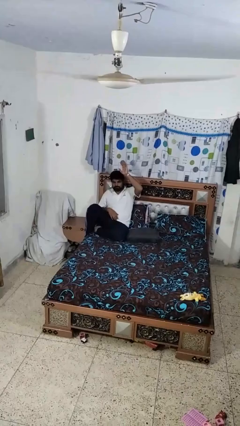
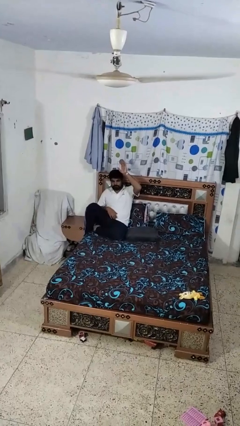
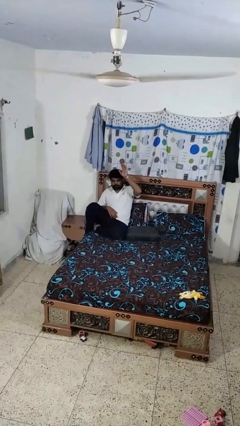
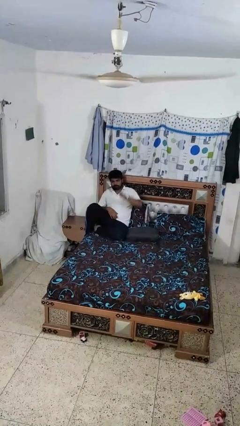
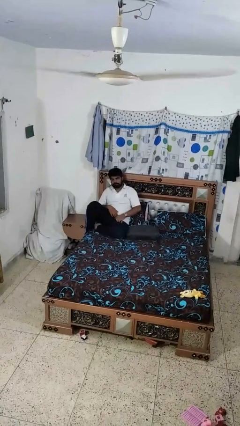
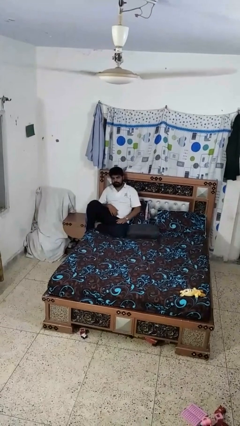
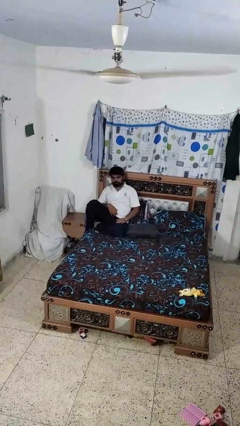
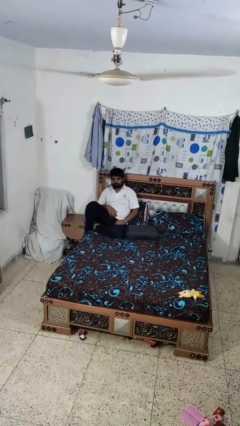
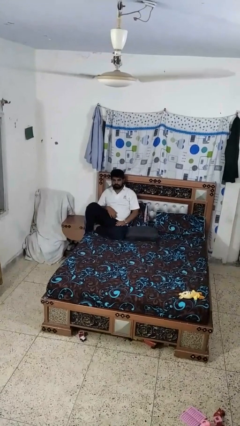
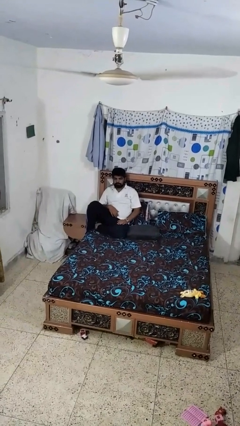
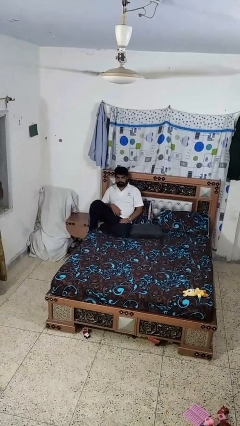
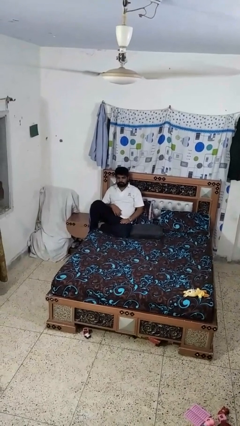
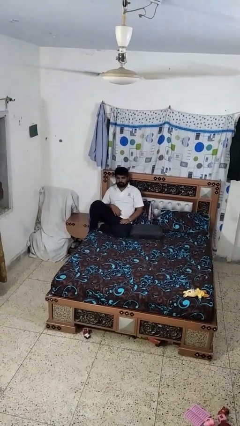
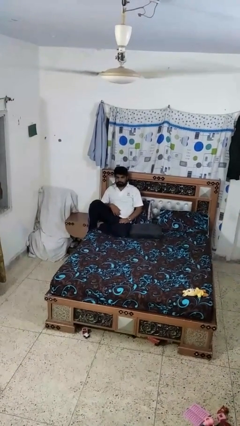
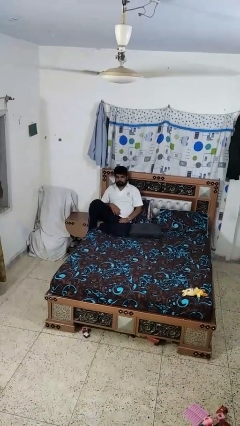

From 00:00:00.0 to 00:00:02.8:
person gestures lower hand

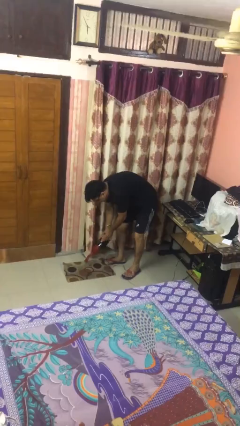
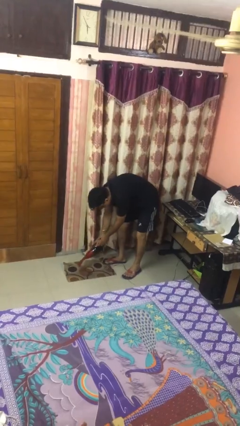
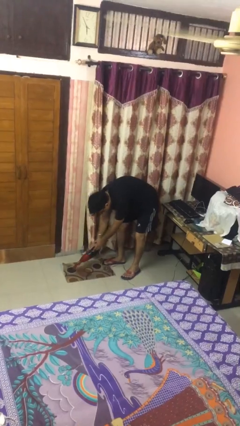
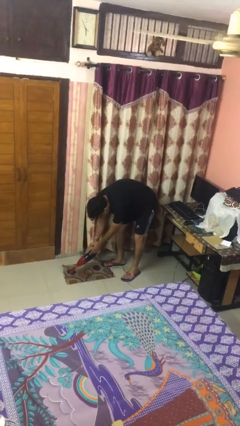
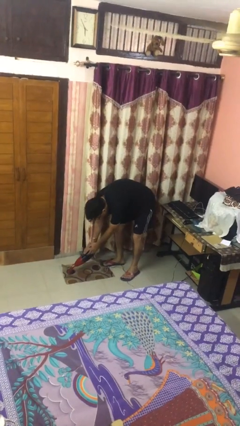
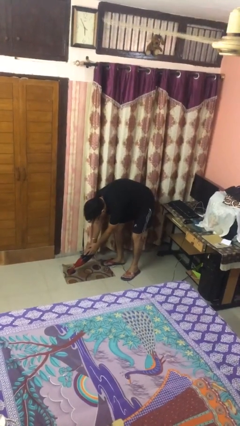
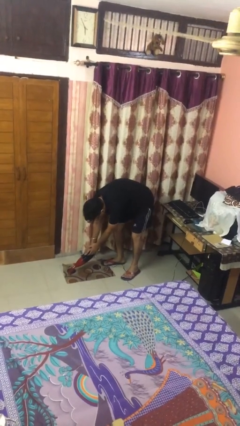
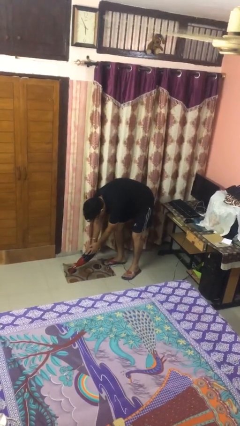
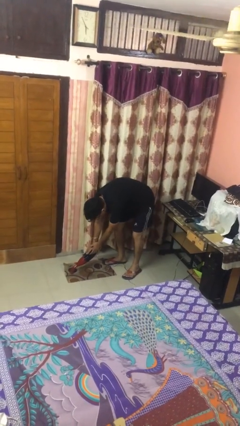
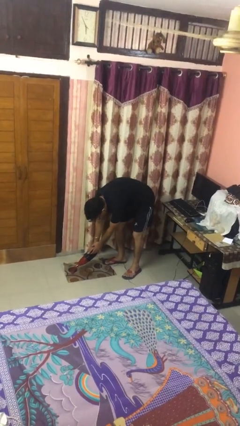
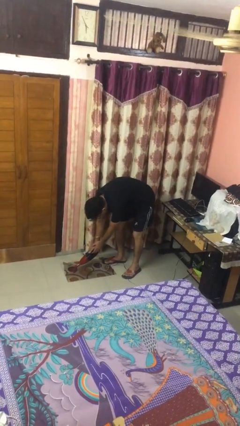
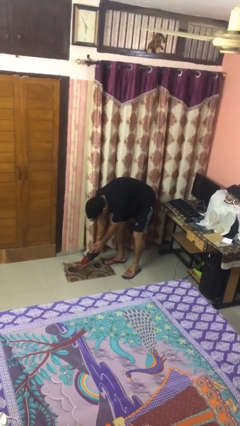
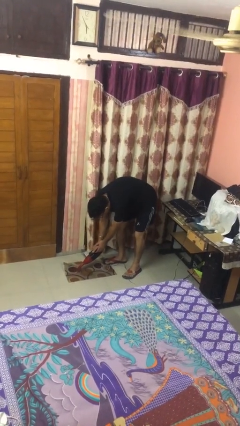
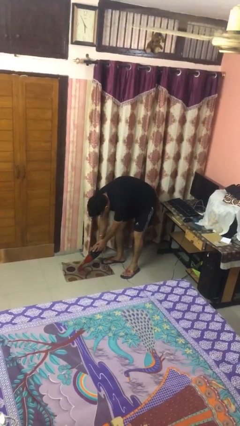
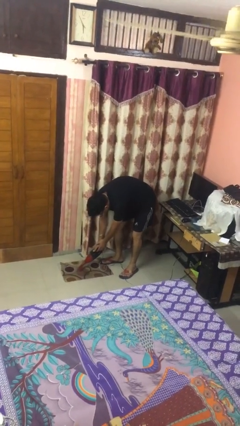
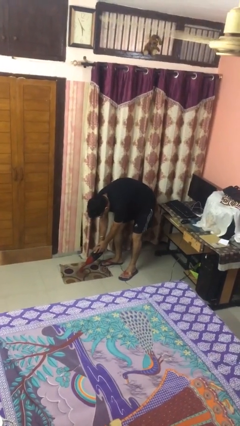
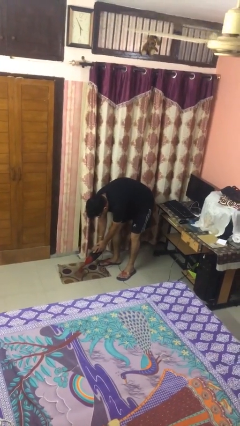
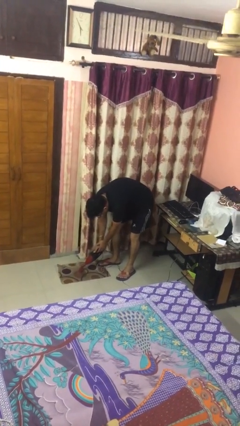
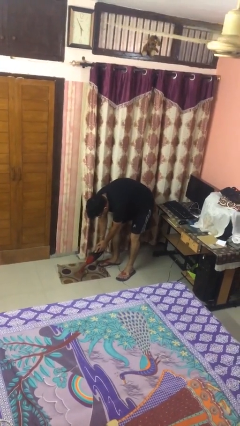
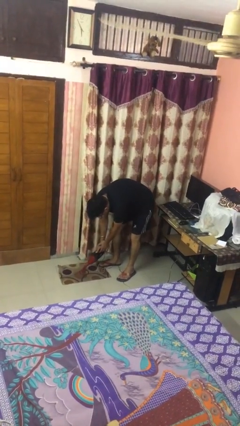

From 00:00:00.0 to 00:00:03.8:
person vacuums carpet

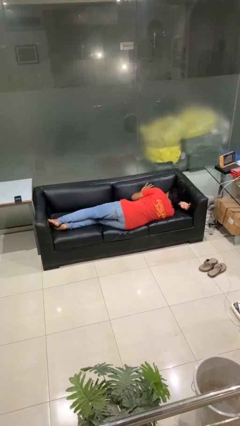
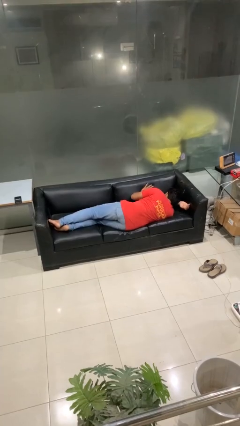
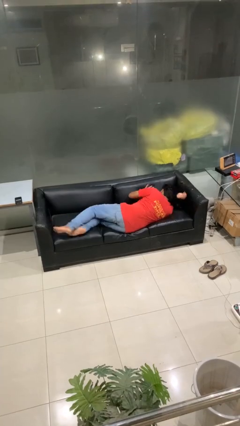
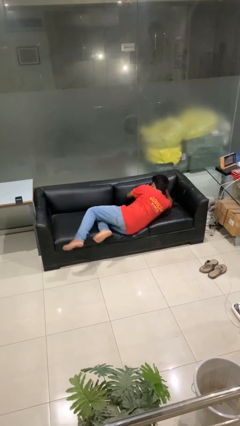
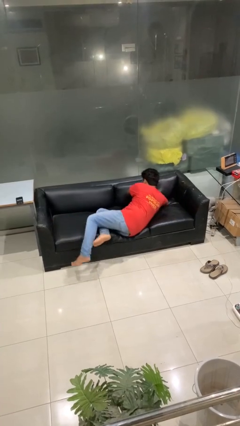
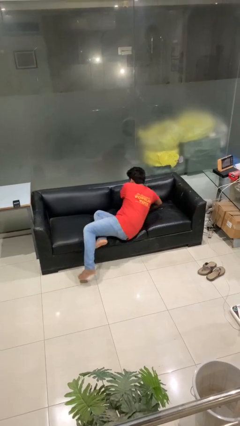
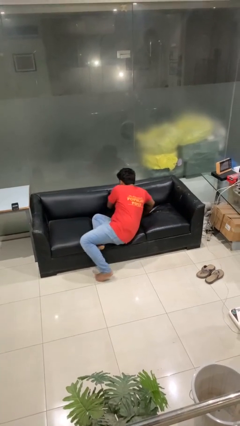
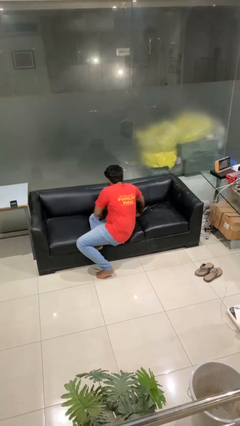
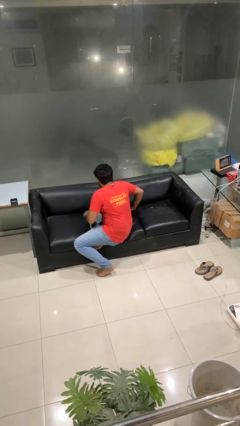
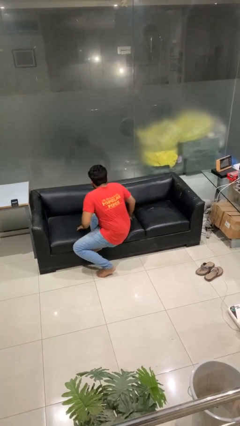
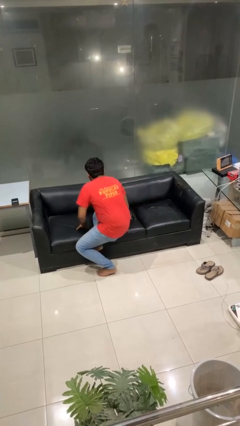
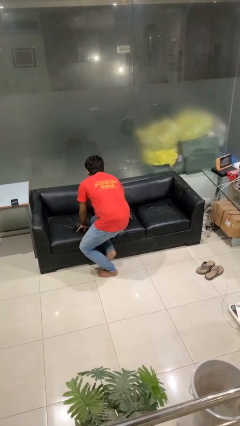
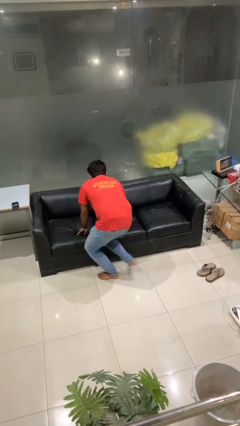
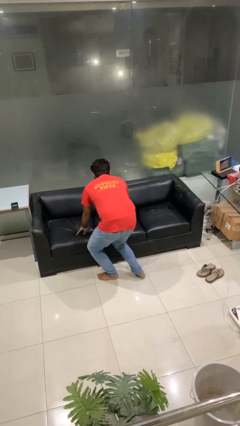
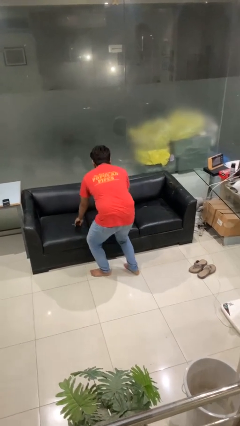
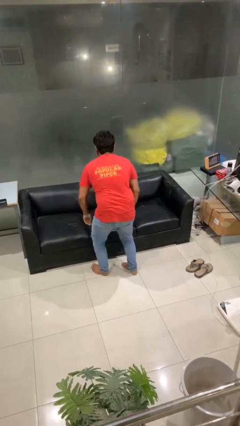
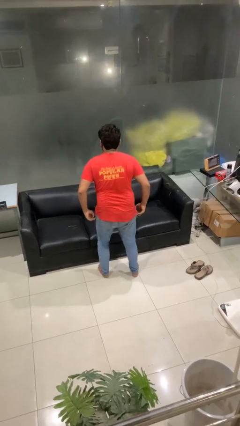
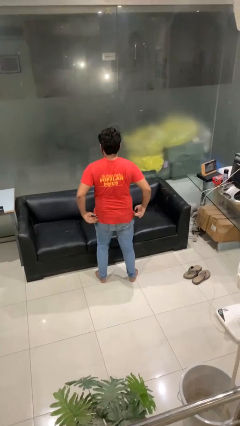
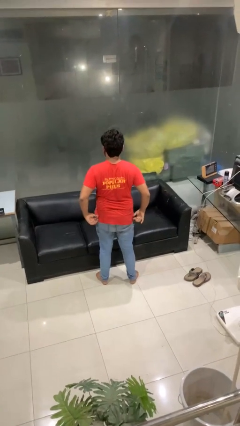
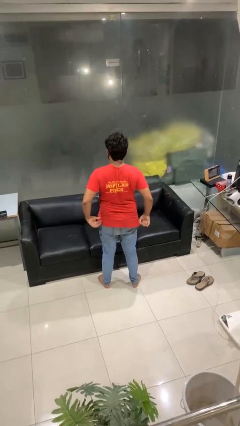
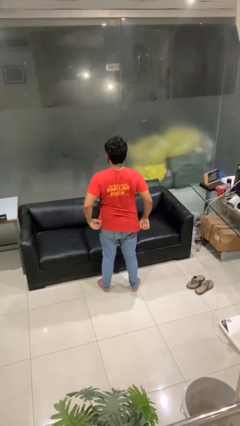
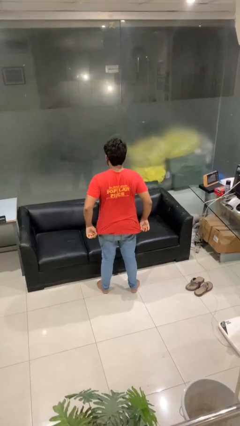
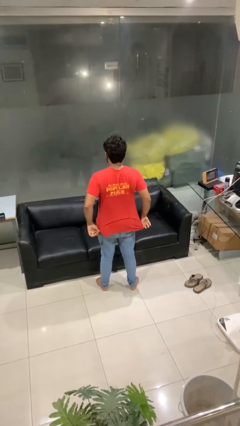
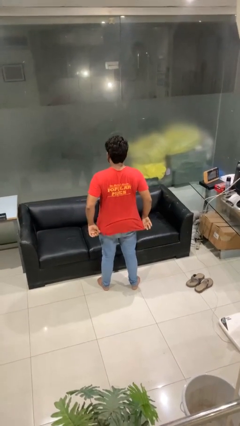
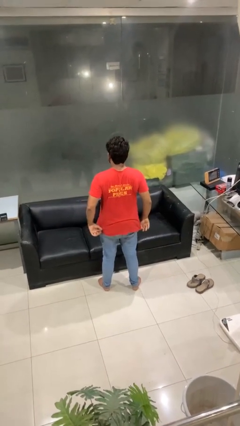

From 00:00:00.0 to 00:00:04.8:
person stands up

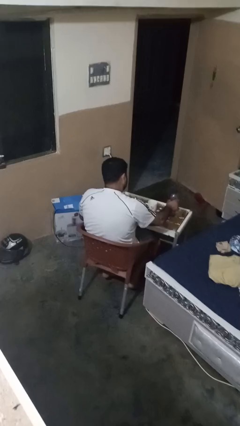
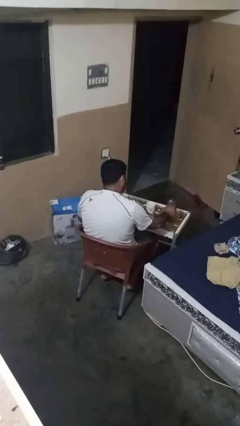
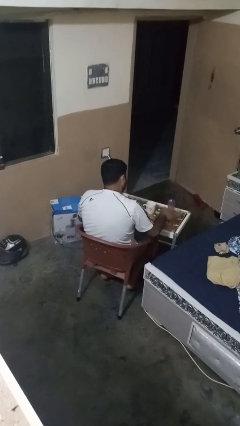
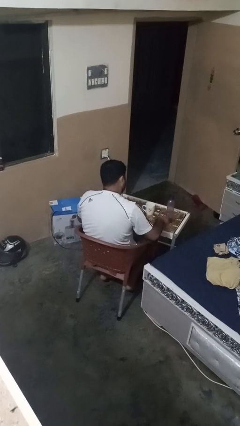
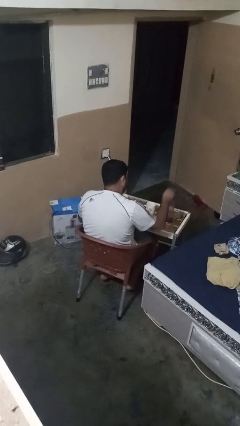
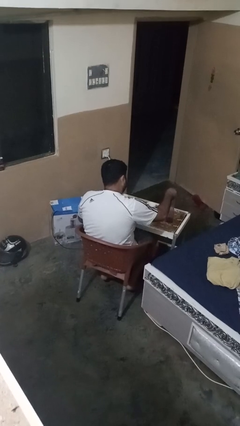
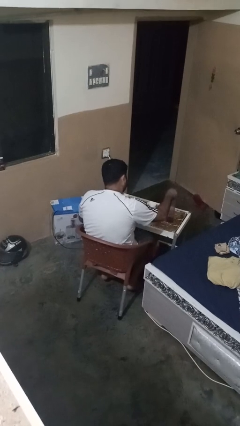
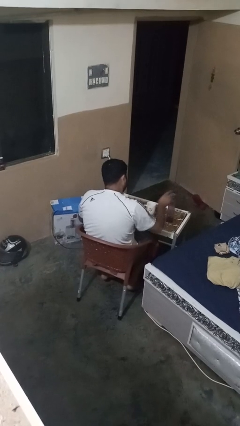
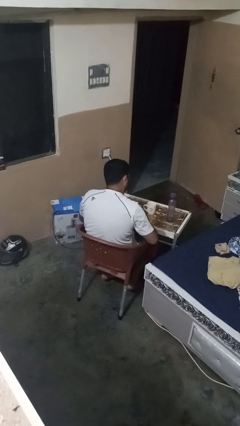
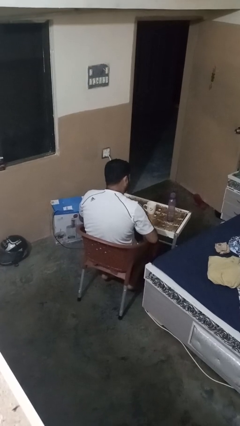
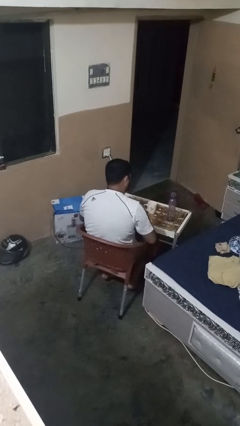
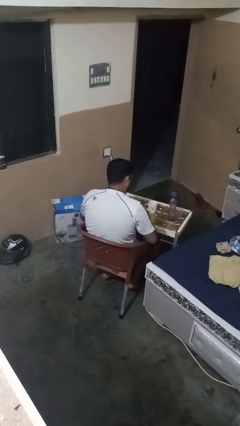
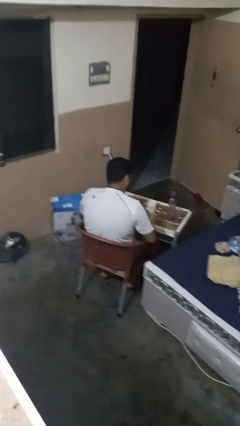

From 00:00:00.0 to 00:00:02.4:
person screws lid to bottle

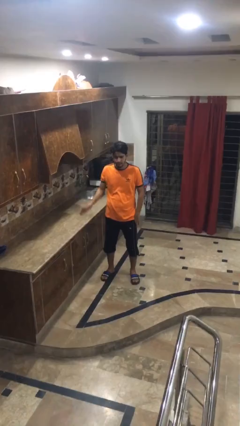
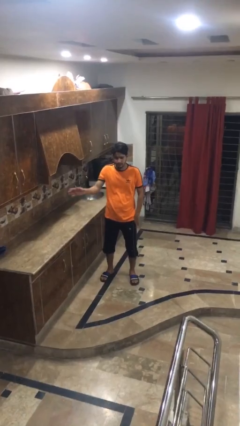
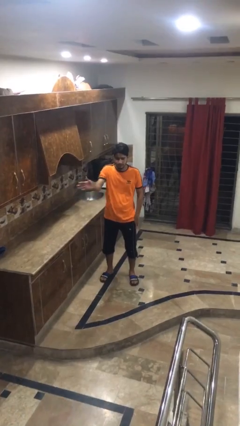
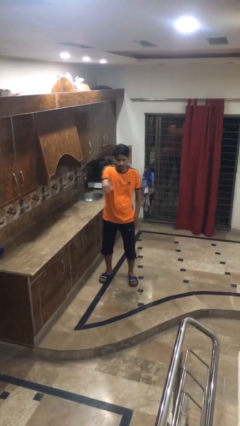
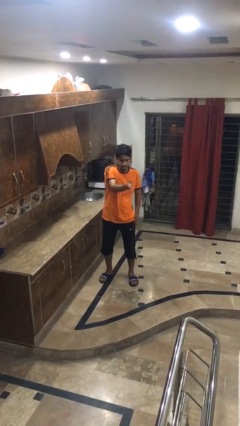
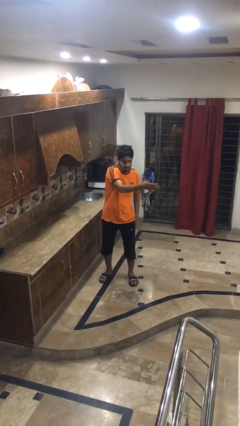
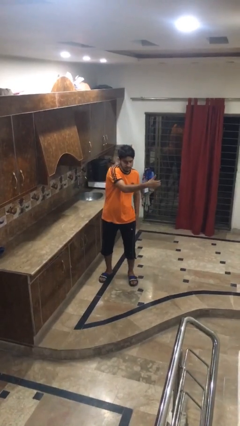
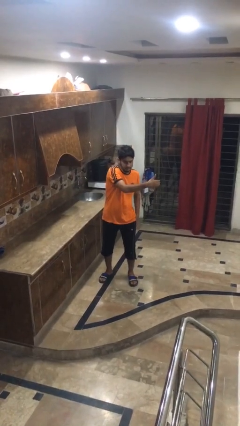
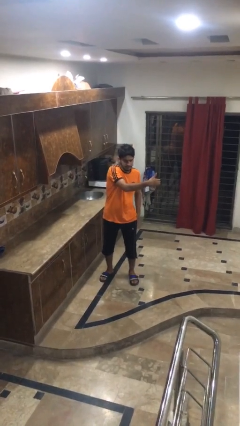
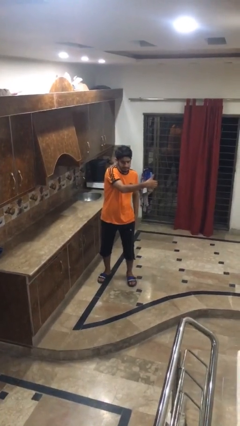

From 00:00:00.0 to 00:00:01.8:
person gestures swipe left

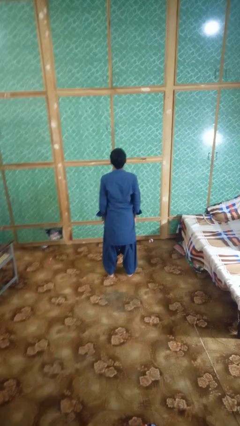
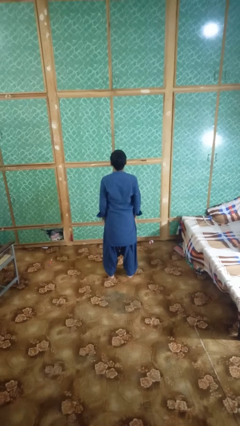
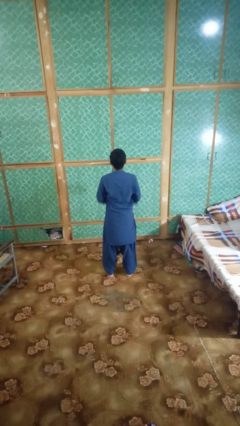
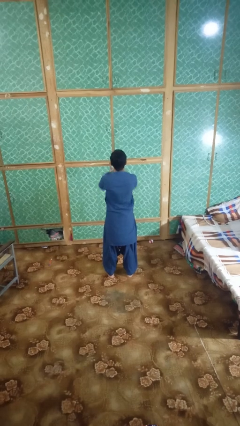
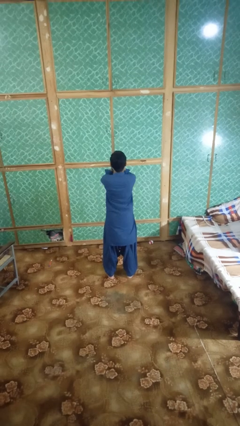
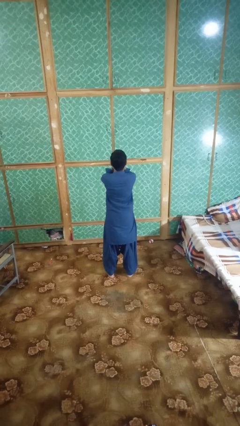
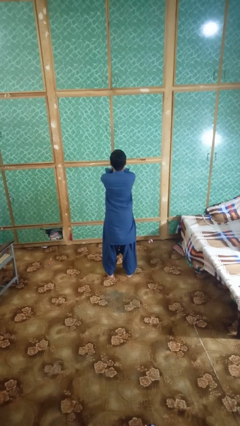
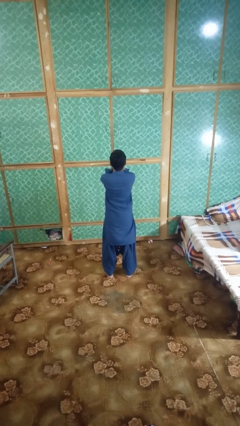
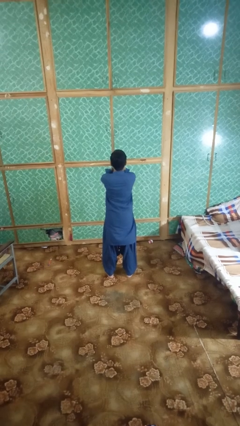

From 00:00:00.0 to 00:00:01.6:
person covers face with hands

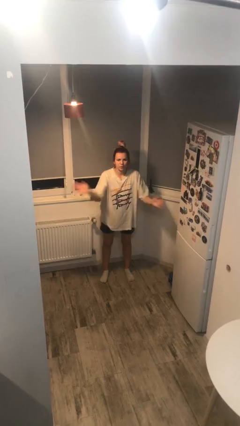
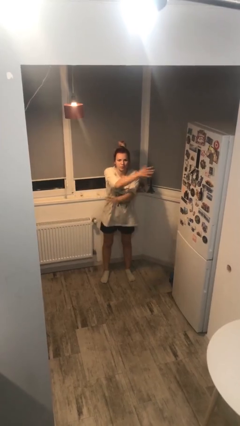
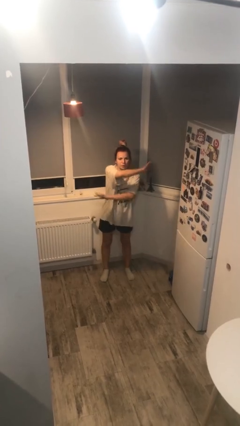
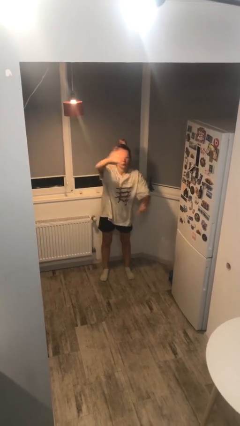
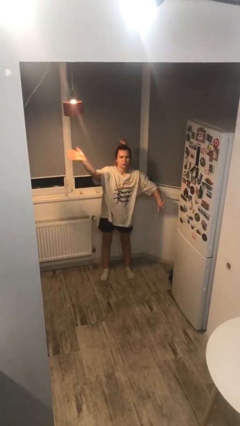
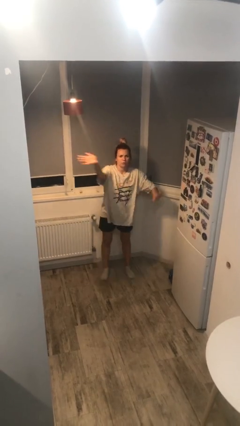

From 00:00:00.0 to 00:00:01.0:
person punches
